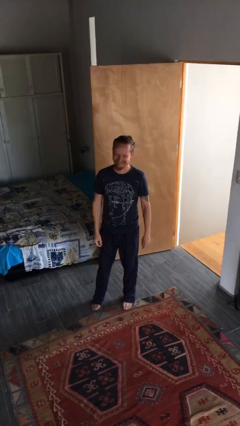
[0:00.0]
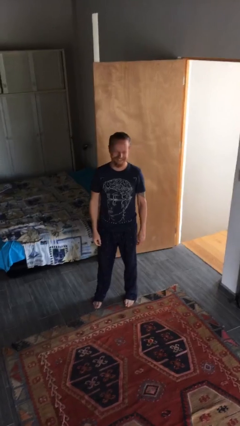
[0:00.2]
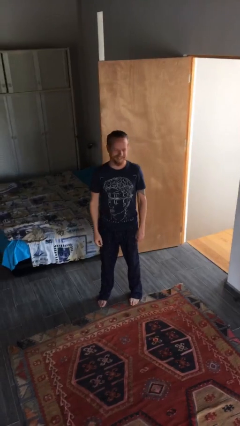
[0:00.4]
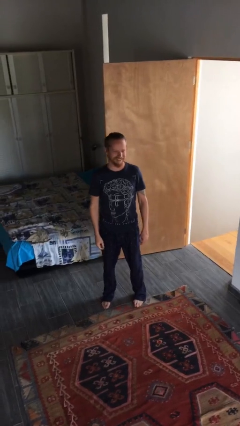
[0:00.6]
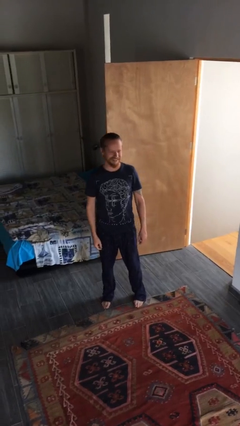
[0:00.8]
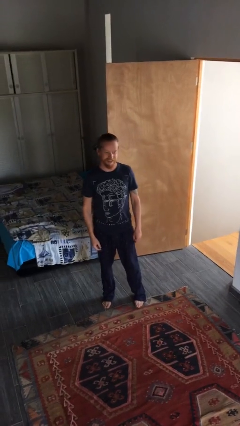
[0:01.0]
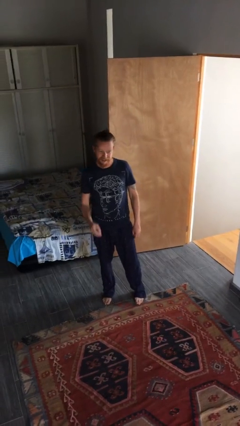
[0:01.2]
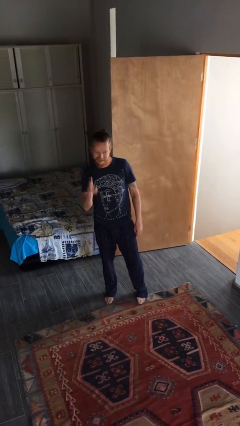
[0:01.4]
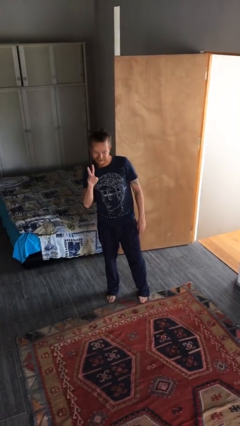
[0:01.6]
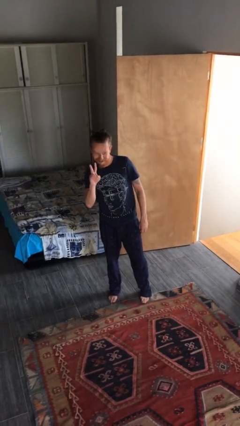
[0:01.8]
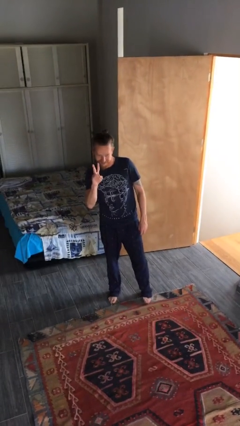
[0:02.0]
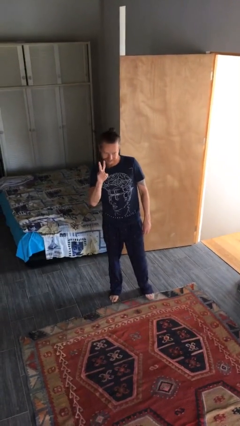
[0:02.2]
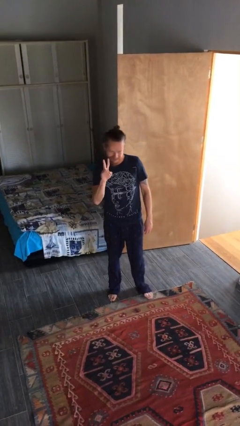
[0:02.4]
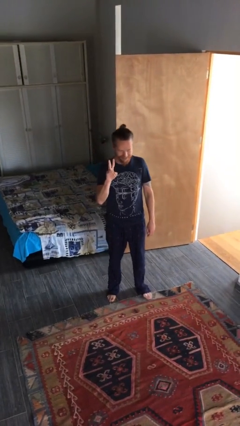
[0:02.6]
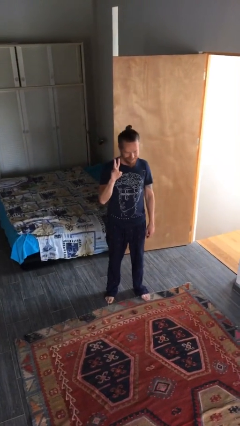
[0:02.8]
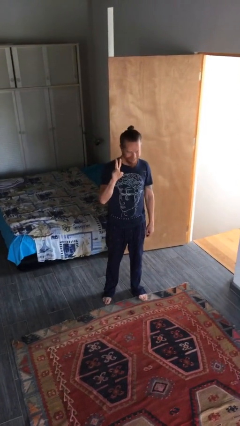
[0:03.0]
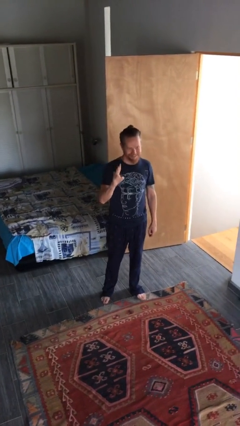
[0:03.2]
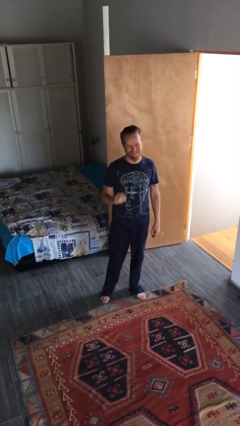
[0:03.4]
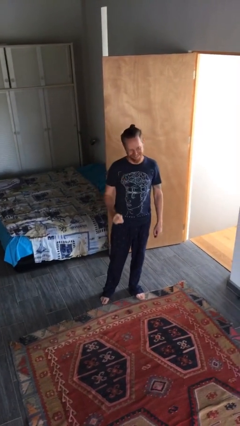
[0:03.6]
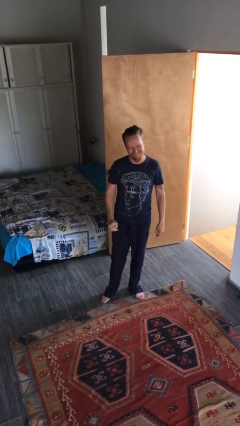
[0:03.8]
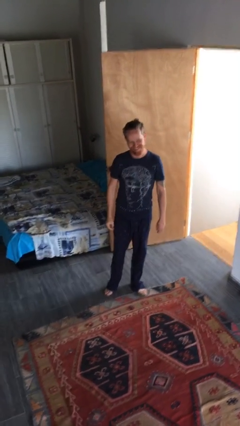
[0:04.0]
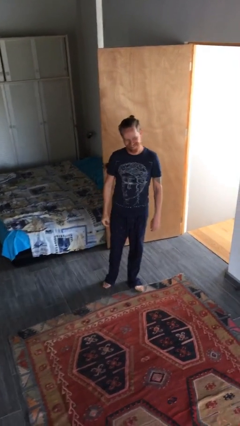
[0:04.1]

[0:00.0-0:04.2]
person gestures peace

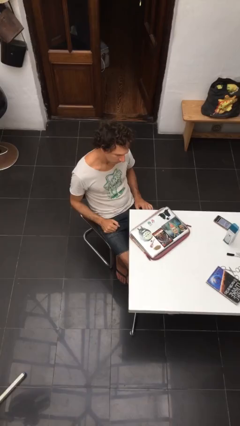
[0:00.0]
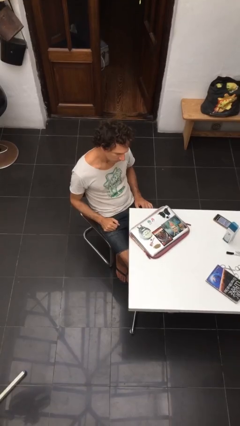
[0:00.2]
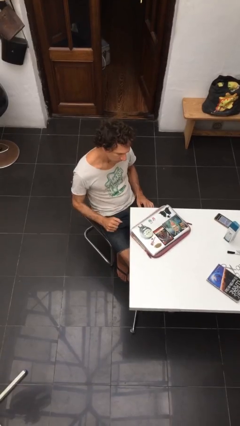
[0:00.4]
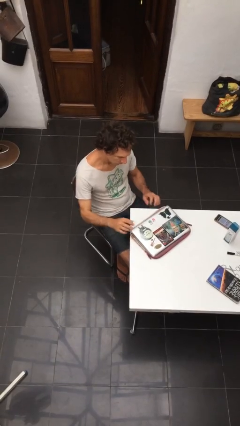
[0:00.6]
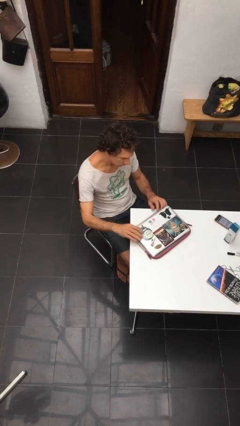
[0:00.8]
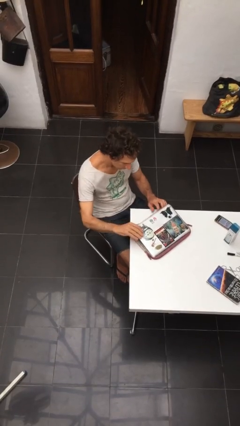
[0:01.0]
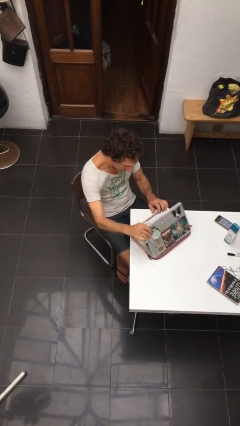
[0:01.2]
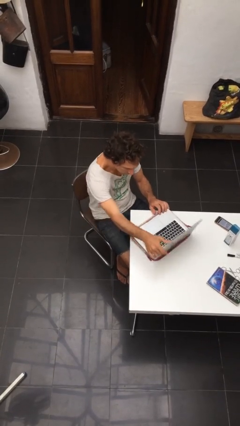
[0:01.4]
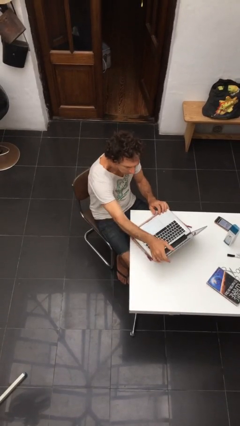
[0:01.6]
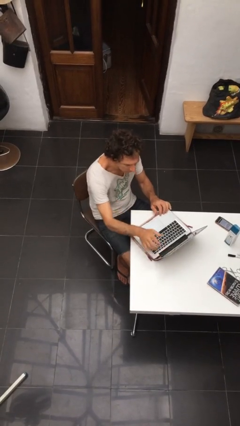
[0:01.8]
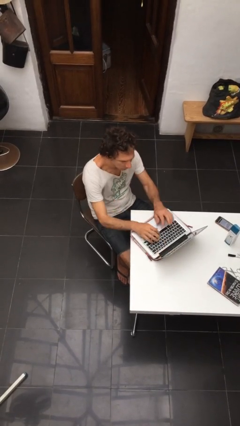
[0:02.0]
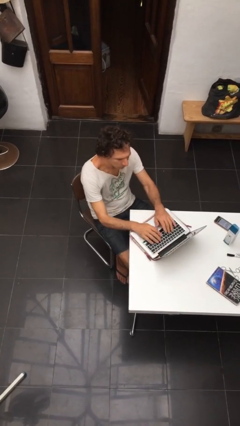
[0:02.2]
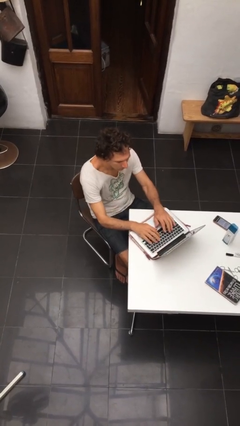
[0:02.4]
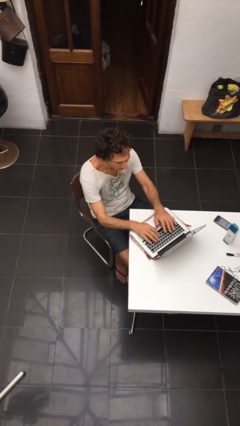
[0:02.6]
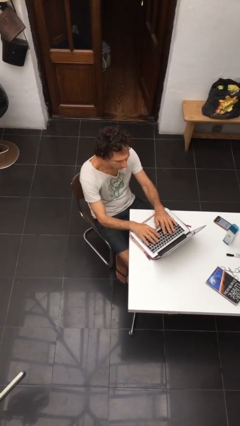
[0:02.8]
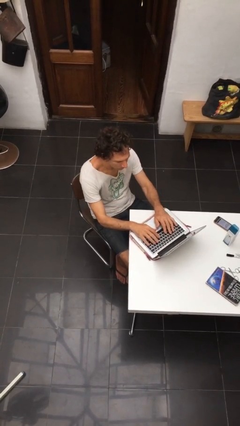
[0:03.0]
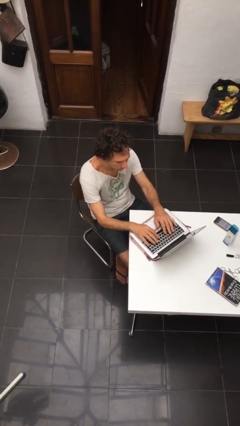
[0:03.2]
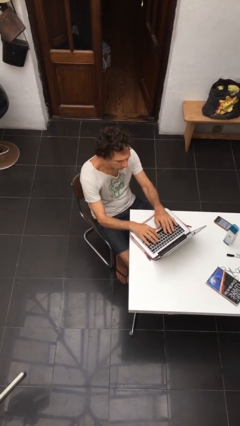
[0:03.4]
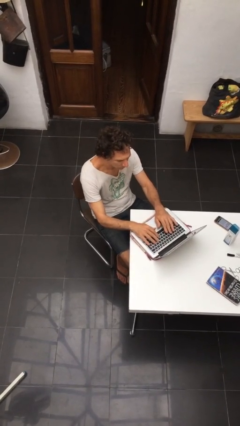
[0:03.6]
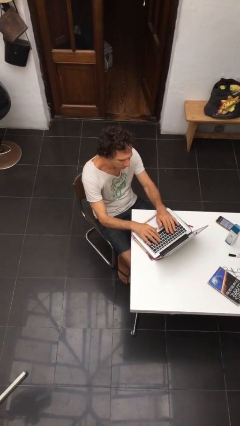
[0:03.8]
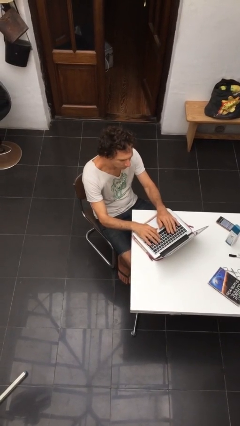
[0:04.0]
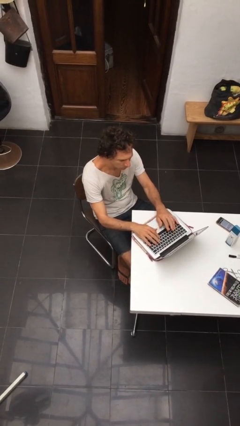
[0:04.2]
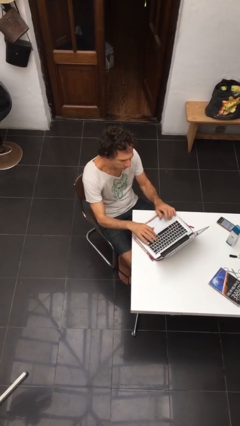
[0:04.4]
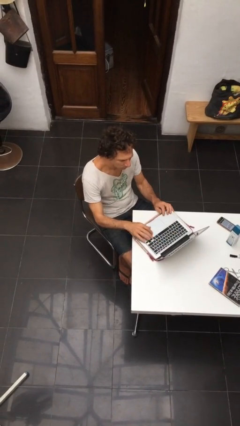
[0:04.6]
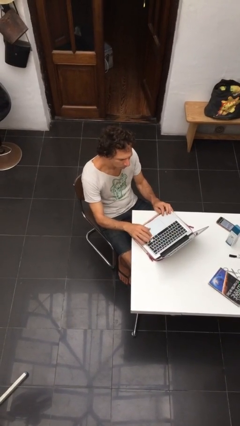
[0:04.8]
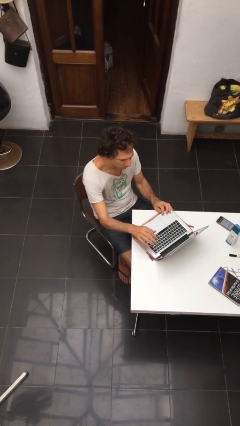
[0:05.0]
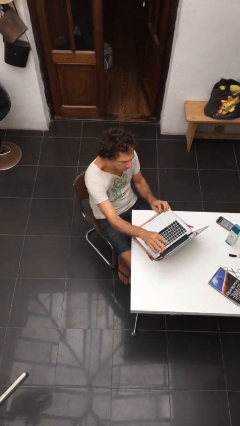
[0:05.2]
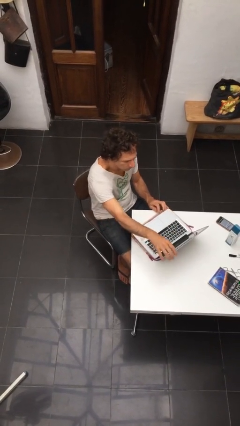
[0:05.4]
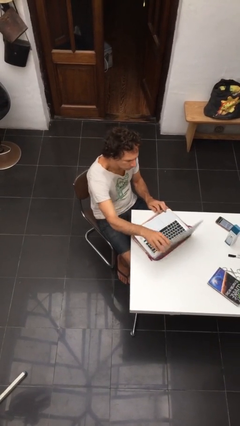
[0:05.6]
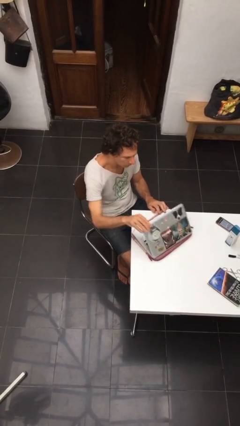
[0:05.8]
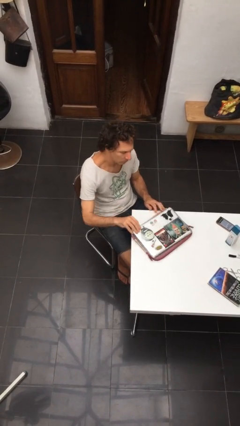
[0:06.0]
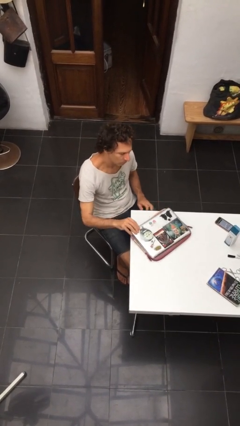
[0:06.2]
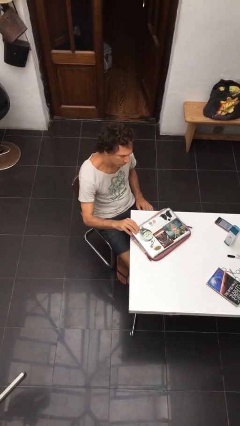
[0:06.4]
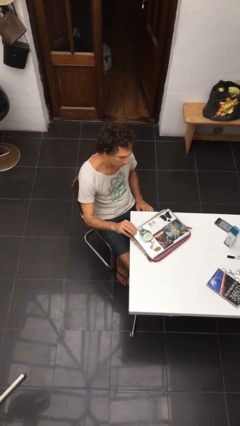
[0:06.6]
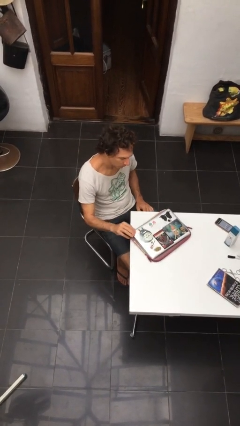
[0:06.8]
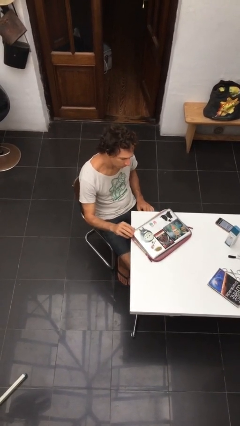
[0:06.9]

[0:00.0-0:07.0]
person interacts with laptop

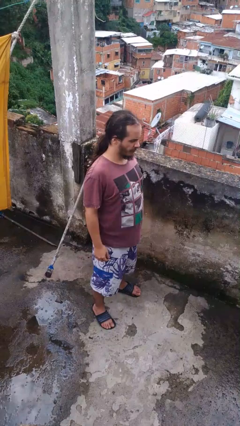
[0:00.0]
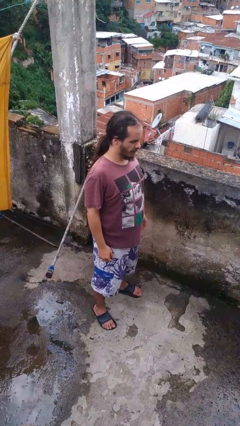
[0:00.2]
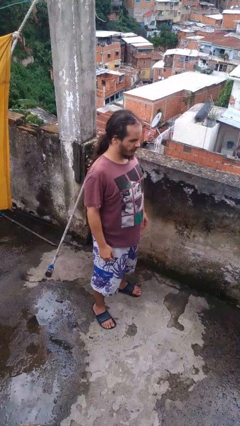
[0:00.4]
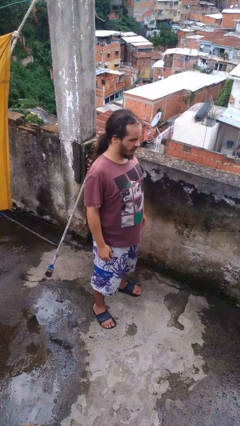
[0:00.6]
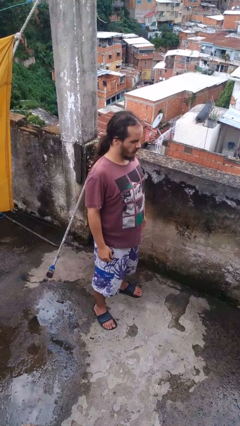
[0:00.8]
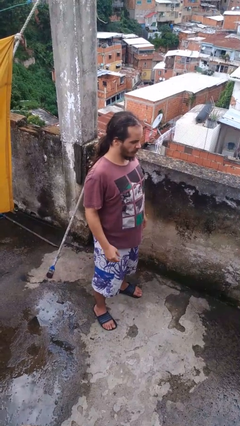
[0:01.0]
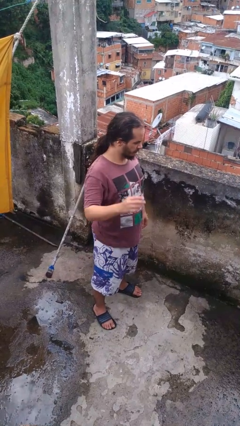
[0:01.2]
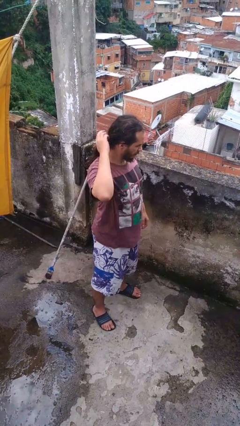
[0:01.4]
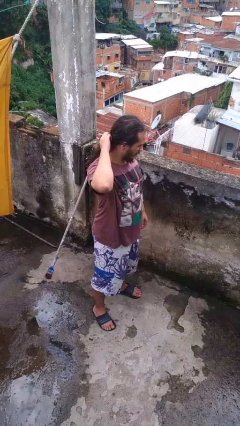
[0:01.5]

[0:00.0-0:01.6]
person takes off hairtie

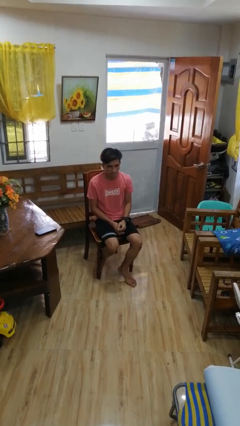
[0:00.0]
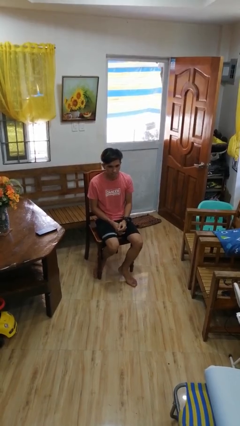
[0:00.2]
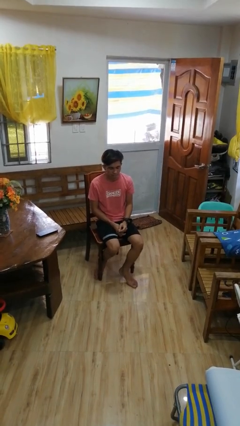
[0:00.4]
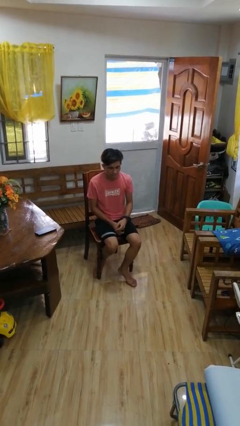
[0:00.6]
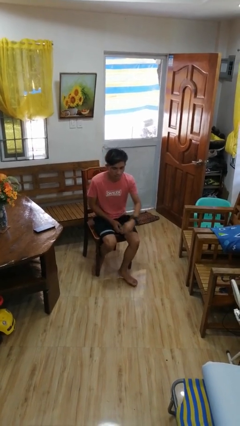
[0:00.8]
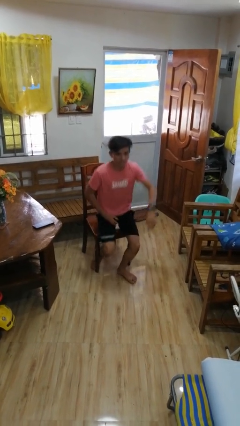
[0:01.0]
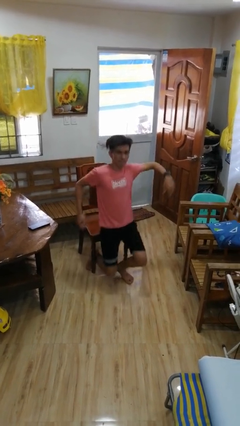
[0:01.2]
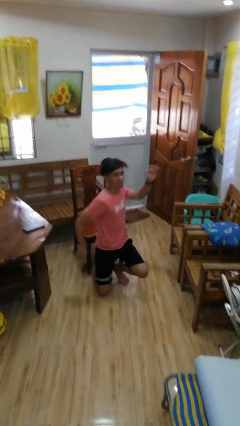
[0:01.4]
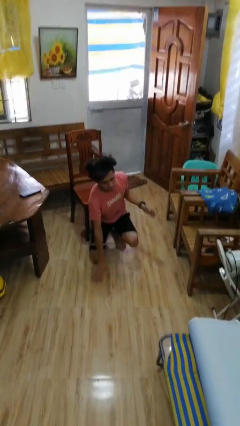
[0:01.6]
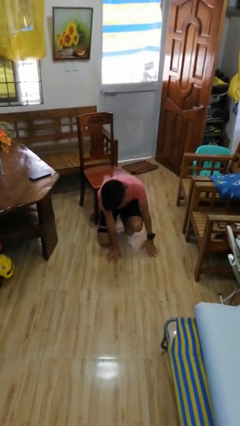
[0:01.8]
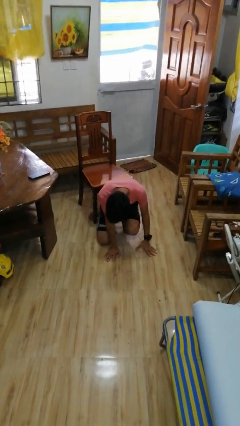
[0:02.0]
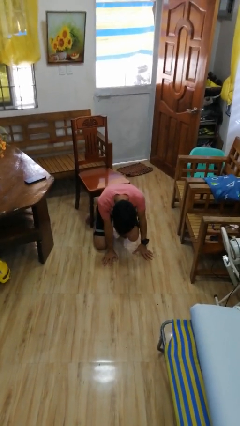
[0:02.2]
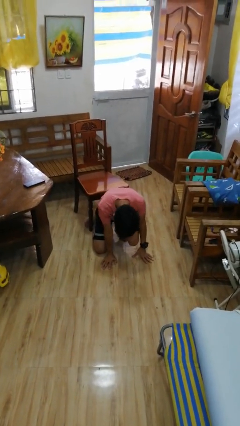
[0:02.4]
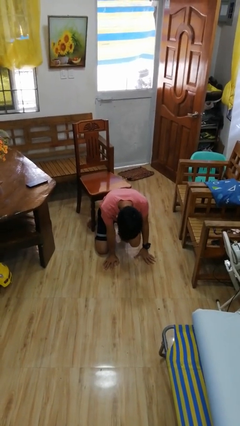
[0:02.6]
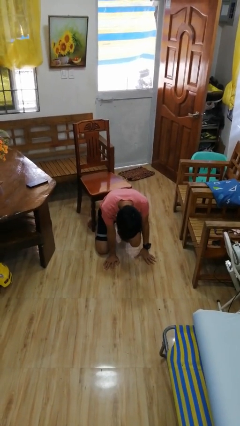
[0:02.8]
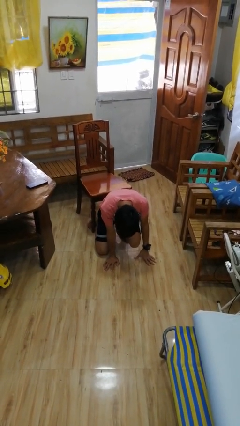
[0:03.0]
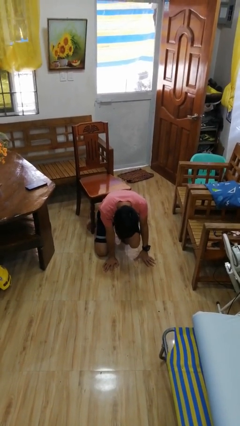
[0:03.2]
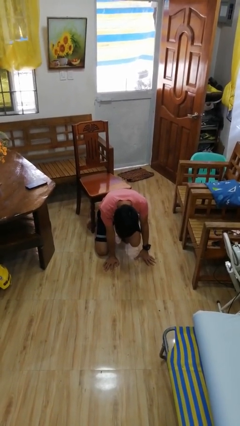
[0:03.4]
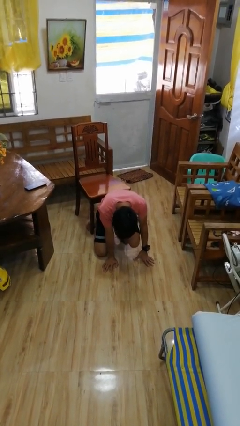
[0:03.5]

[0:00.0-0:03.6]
person falls from chair

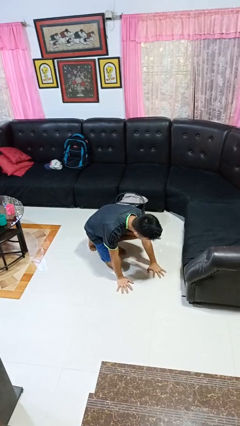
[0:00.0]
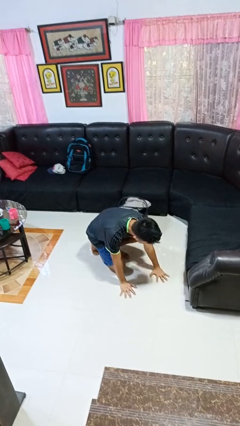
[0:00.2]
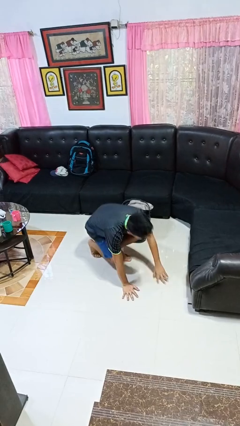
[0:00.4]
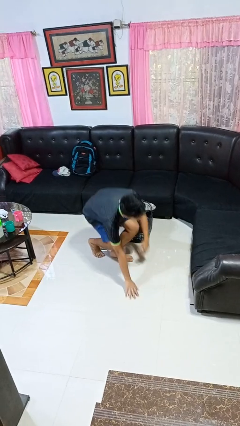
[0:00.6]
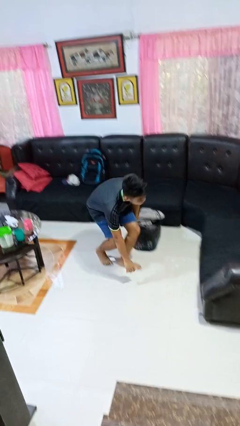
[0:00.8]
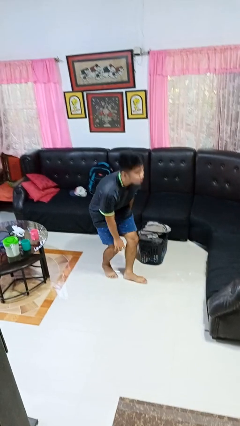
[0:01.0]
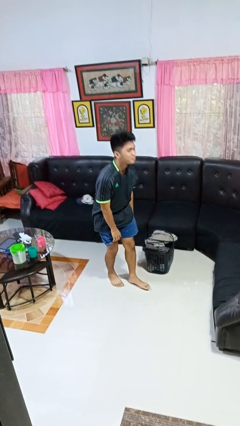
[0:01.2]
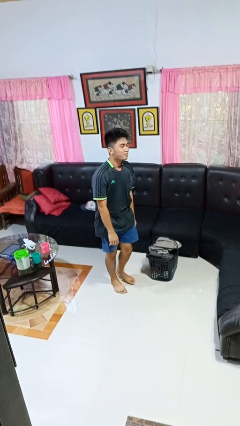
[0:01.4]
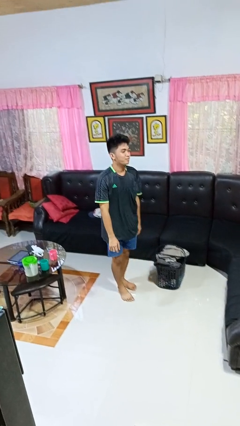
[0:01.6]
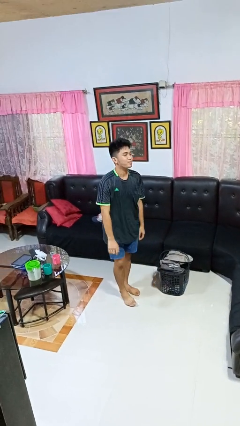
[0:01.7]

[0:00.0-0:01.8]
person stands up from floor
